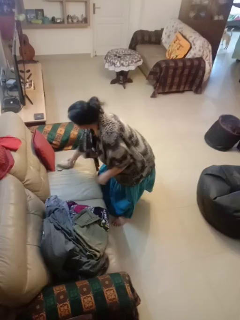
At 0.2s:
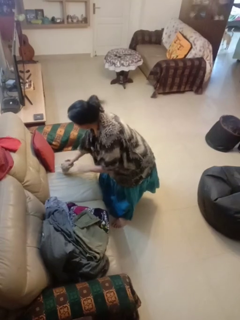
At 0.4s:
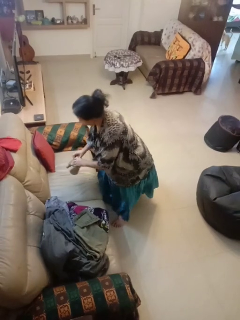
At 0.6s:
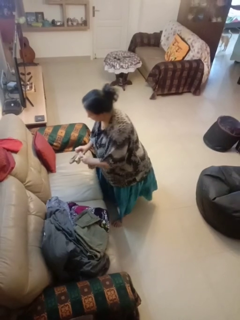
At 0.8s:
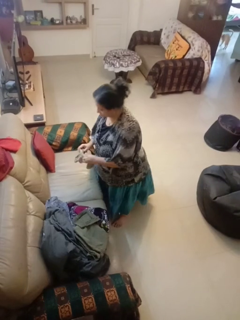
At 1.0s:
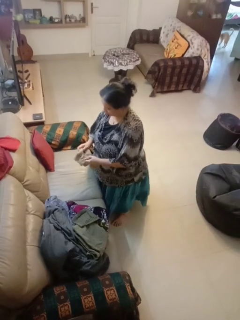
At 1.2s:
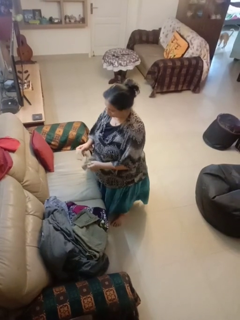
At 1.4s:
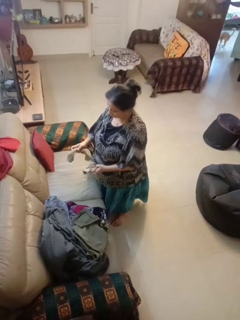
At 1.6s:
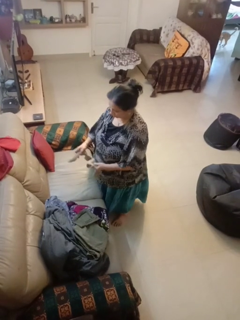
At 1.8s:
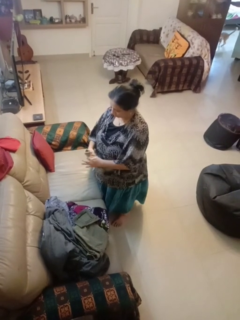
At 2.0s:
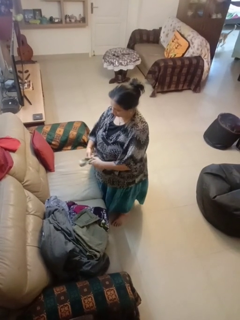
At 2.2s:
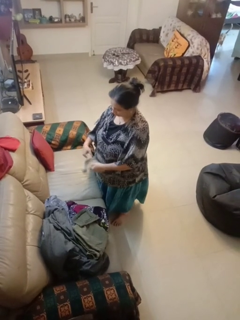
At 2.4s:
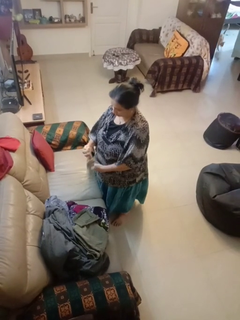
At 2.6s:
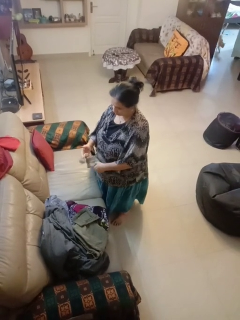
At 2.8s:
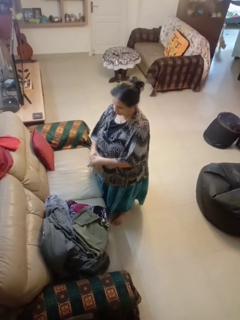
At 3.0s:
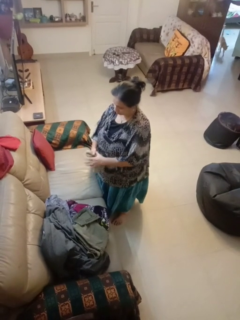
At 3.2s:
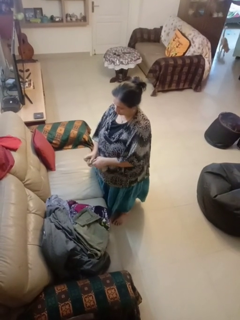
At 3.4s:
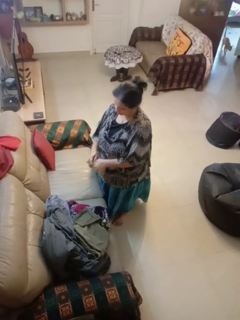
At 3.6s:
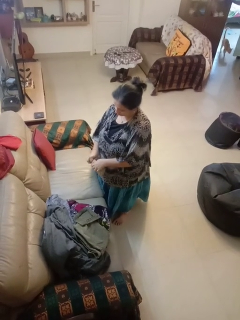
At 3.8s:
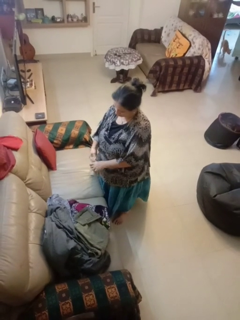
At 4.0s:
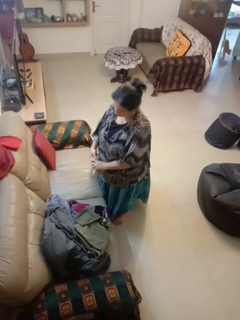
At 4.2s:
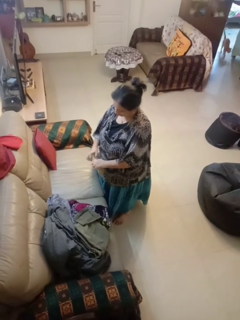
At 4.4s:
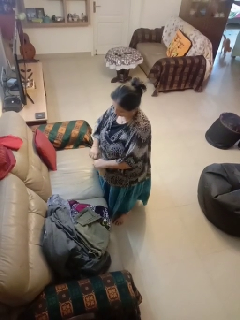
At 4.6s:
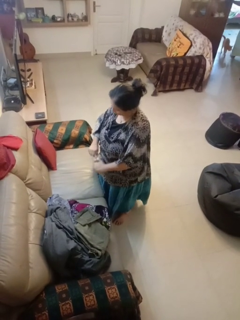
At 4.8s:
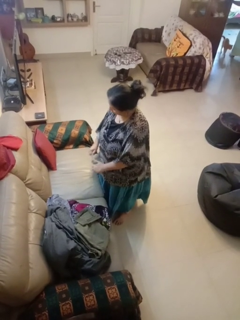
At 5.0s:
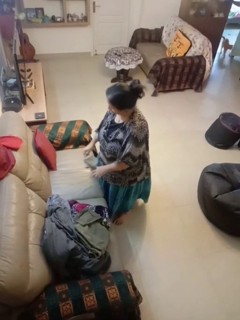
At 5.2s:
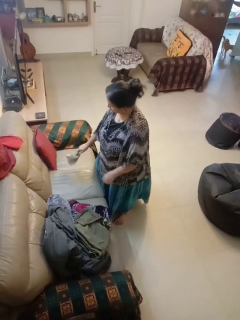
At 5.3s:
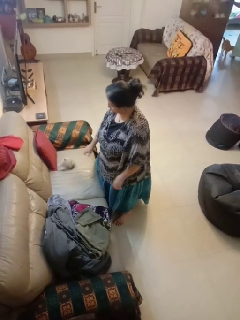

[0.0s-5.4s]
person folds socks

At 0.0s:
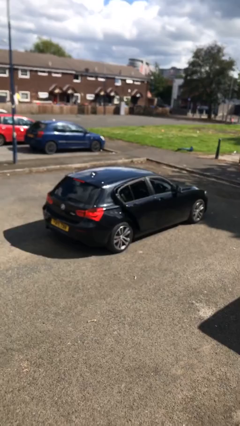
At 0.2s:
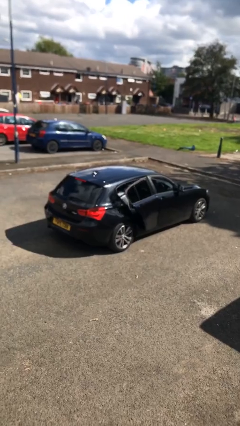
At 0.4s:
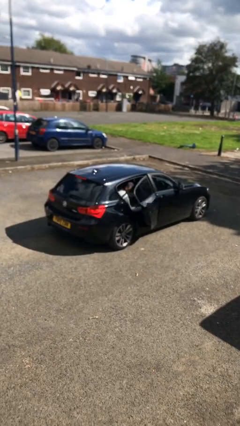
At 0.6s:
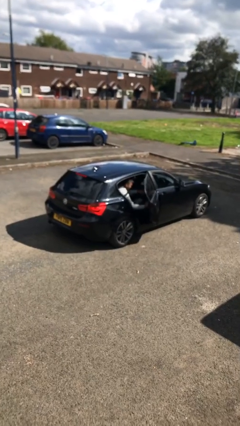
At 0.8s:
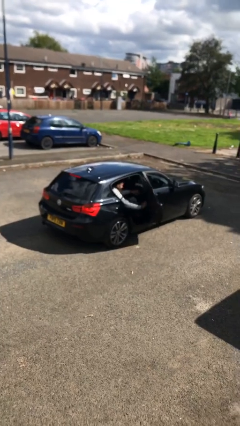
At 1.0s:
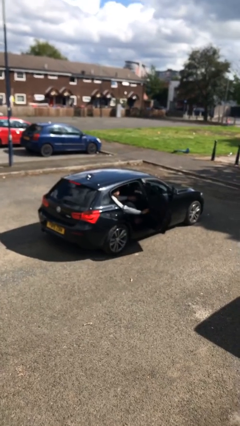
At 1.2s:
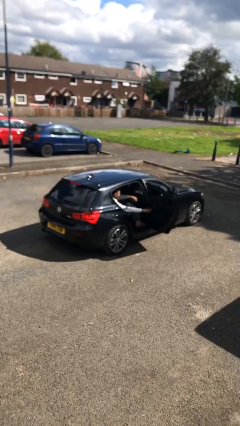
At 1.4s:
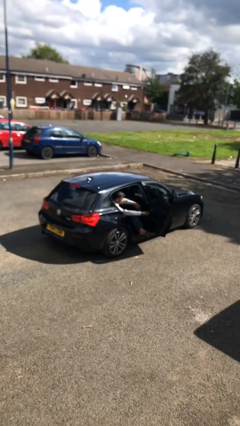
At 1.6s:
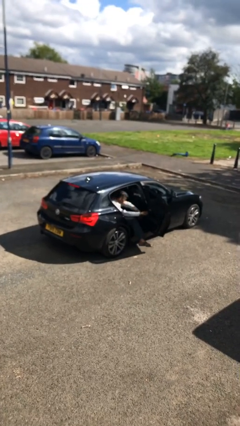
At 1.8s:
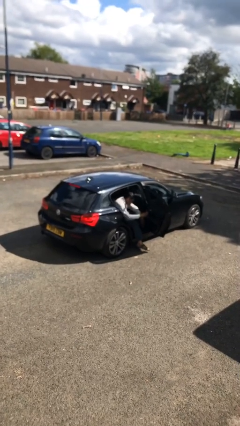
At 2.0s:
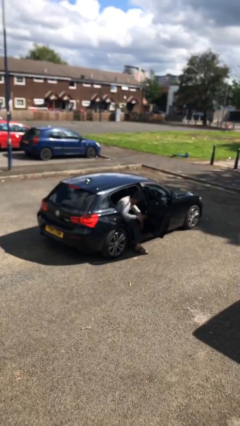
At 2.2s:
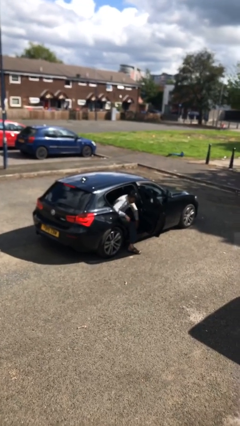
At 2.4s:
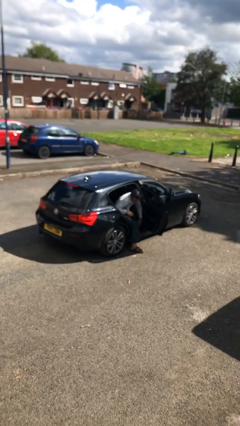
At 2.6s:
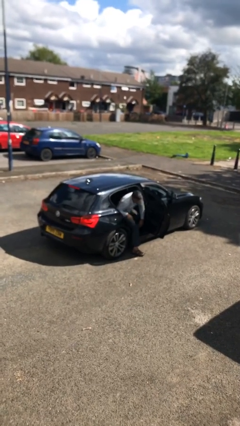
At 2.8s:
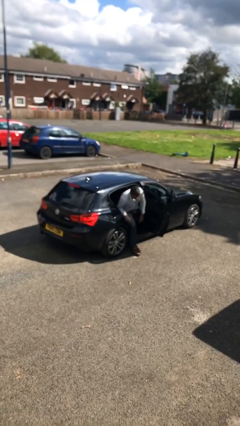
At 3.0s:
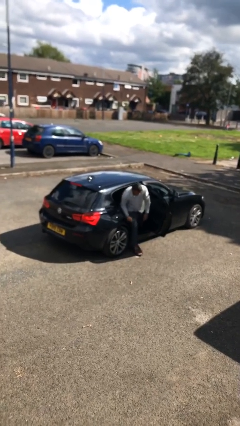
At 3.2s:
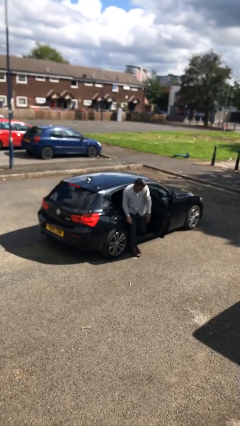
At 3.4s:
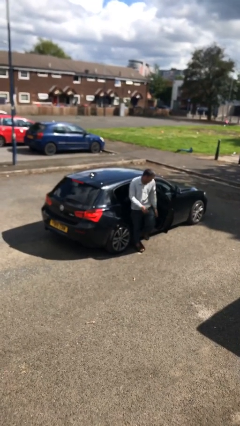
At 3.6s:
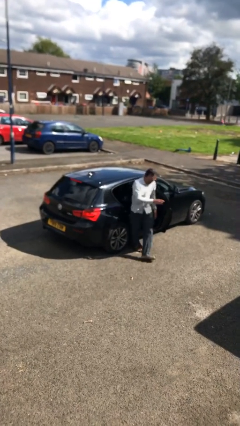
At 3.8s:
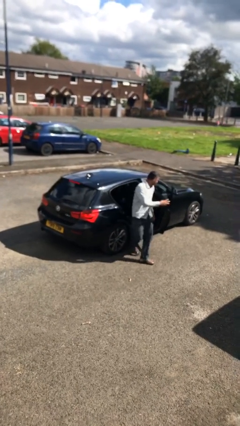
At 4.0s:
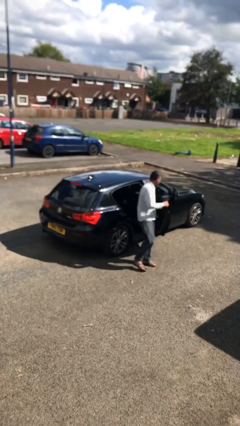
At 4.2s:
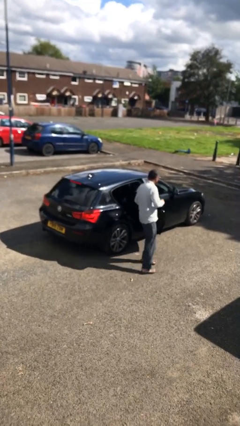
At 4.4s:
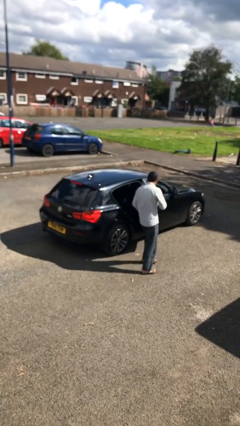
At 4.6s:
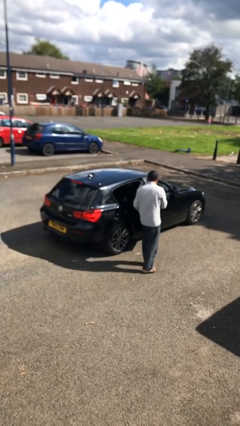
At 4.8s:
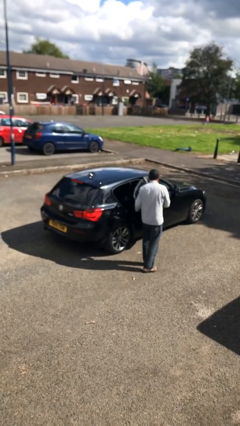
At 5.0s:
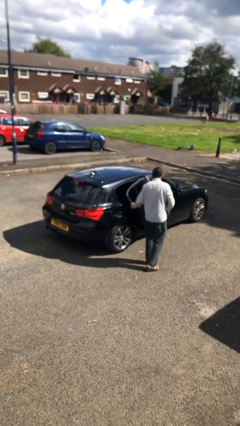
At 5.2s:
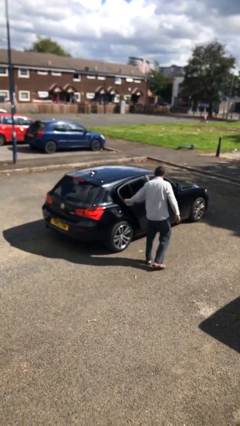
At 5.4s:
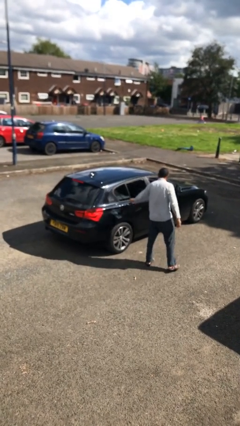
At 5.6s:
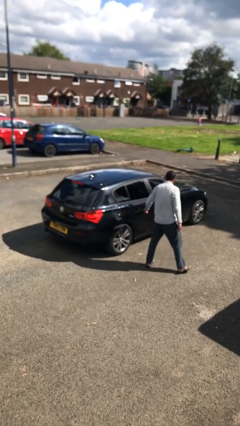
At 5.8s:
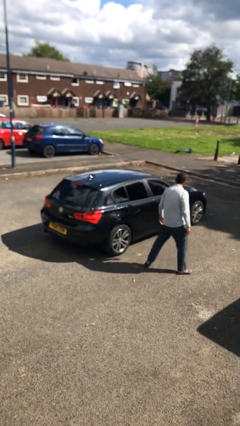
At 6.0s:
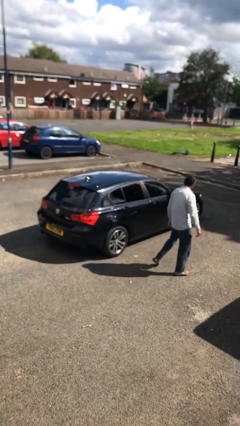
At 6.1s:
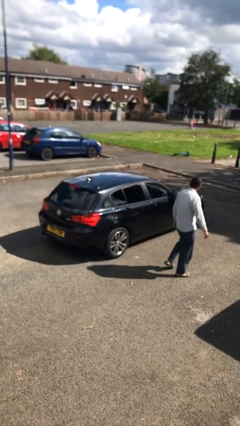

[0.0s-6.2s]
car drops off person

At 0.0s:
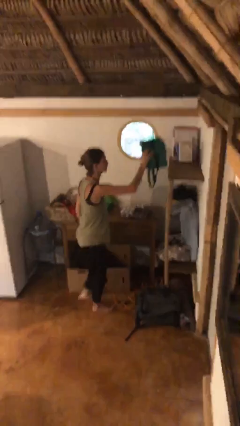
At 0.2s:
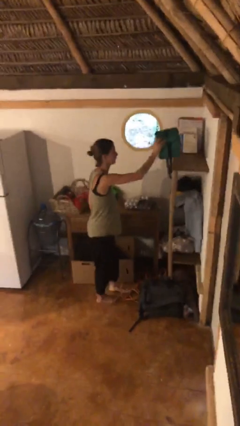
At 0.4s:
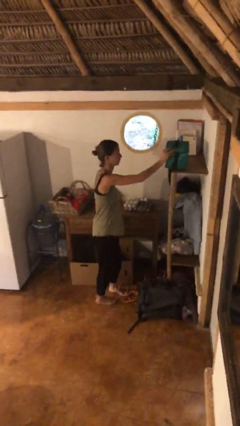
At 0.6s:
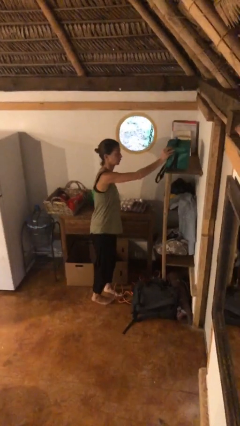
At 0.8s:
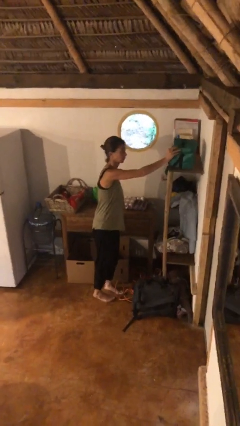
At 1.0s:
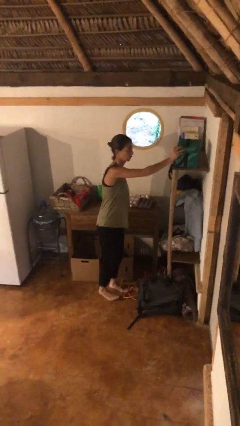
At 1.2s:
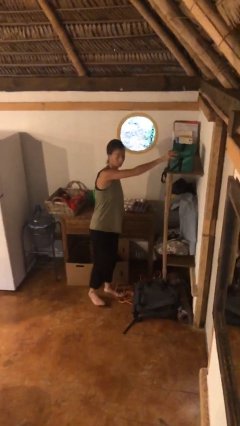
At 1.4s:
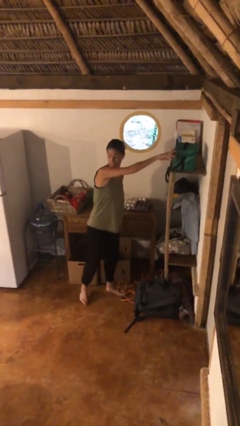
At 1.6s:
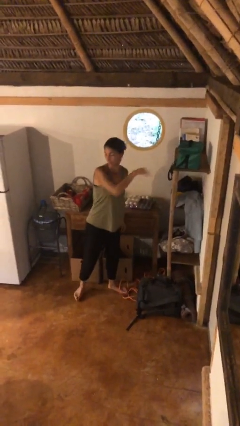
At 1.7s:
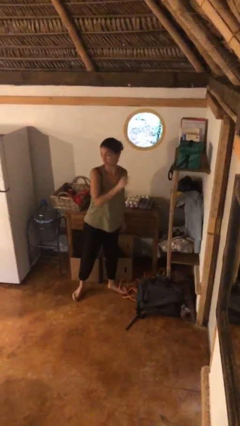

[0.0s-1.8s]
person puts down object on shelf

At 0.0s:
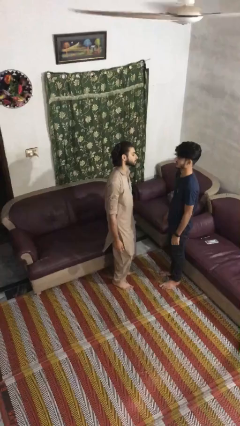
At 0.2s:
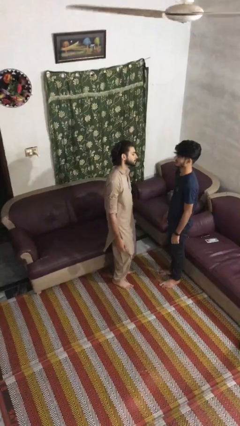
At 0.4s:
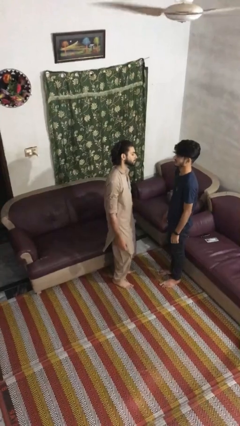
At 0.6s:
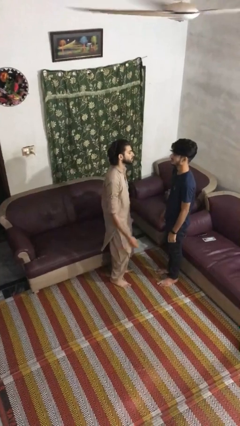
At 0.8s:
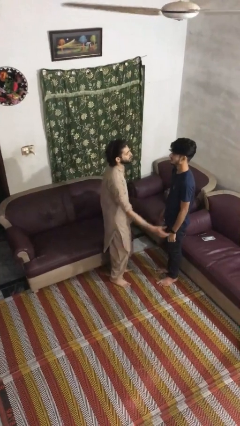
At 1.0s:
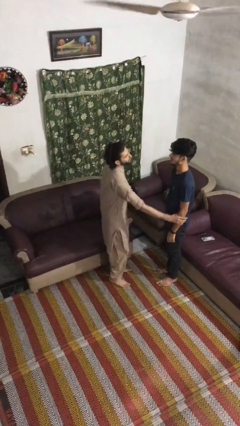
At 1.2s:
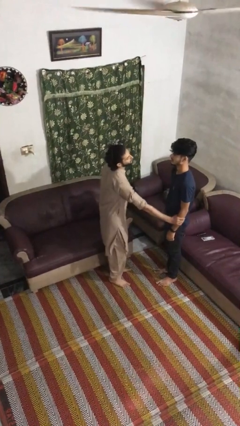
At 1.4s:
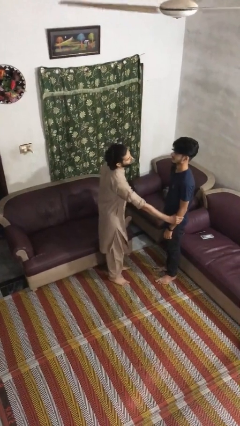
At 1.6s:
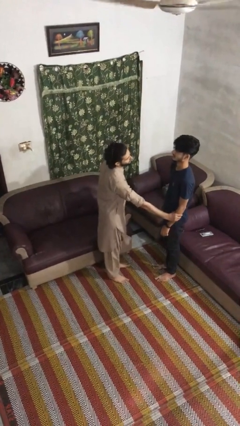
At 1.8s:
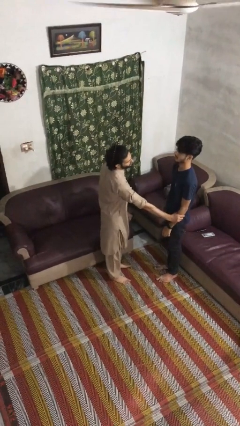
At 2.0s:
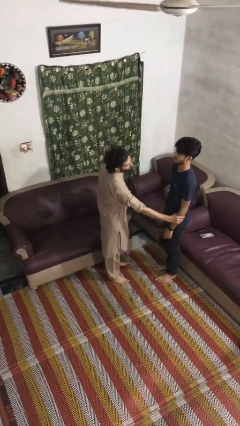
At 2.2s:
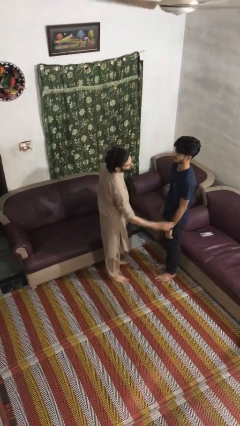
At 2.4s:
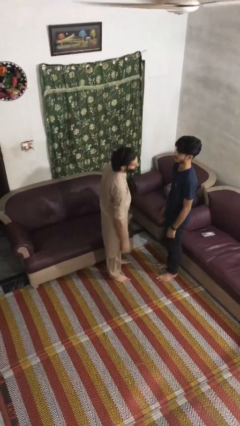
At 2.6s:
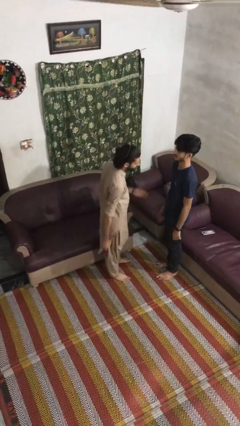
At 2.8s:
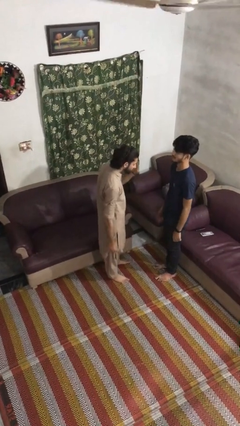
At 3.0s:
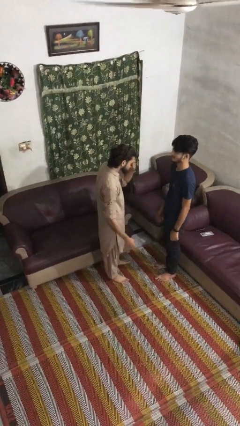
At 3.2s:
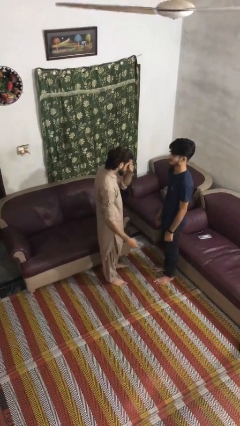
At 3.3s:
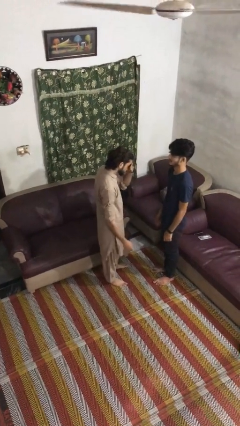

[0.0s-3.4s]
person grabs person by forearm

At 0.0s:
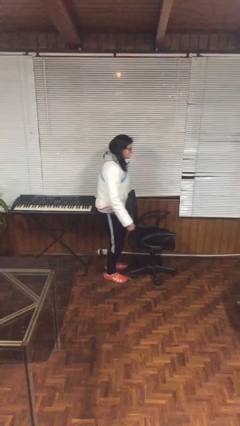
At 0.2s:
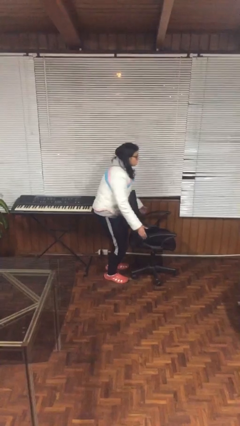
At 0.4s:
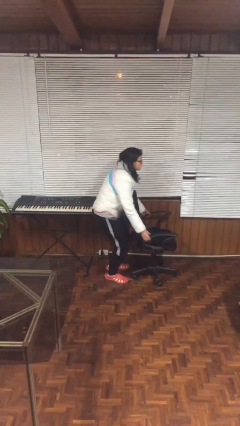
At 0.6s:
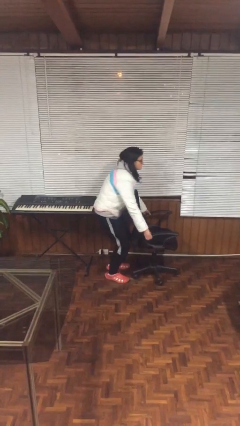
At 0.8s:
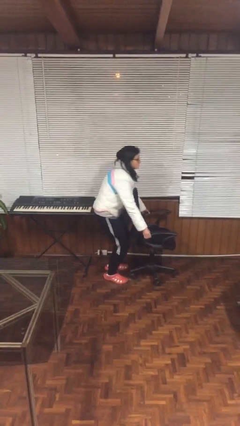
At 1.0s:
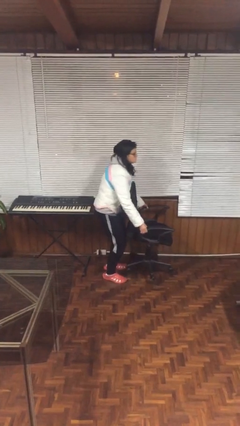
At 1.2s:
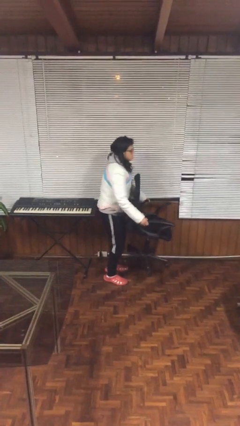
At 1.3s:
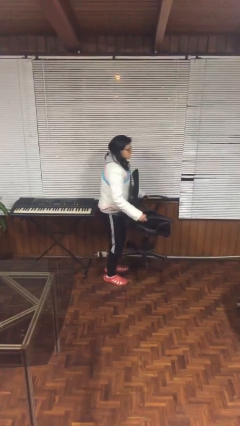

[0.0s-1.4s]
person picks up object from floor

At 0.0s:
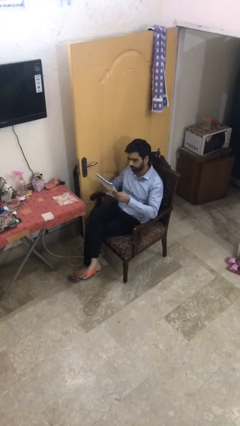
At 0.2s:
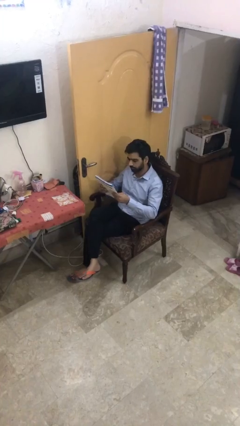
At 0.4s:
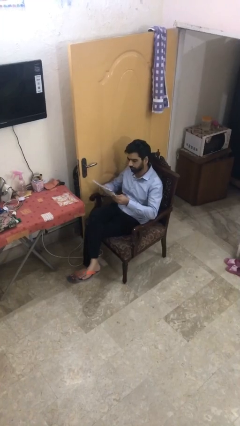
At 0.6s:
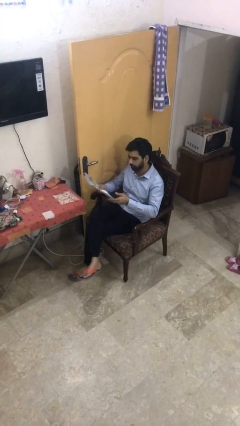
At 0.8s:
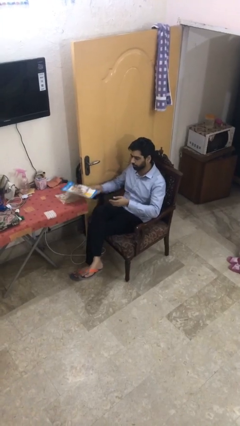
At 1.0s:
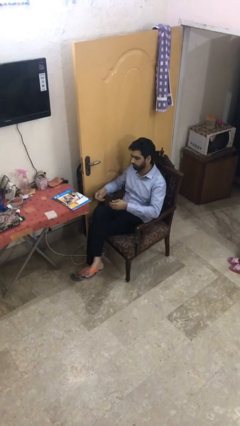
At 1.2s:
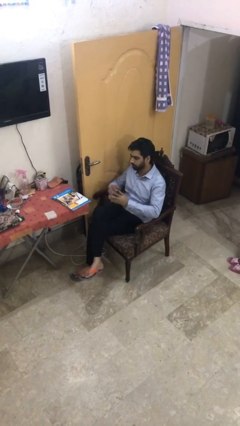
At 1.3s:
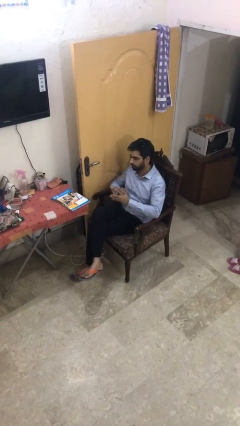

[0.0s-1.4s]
person puts down object on table
